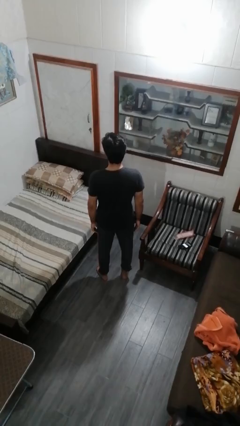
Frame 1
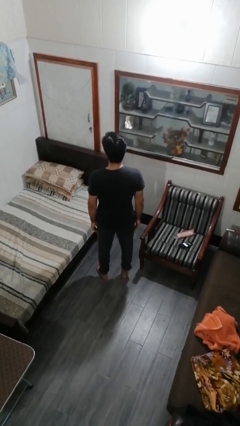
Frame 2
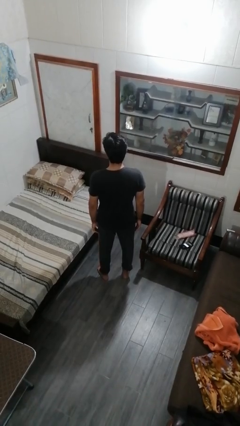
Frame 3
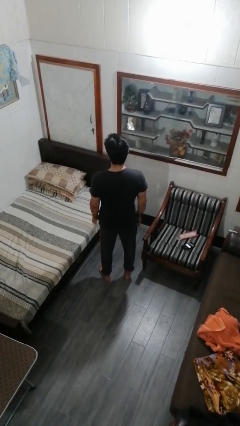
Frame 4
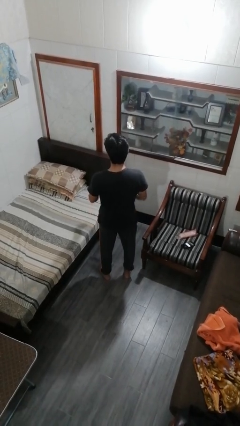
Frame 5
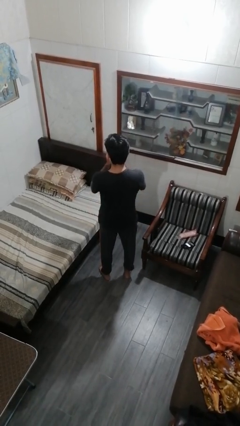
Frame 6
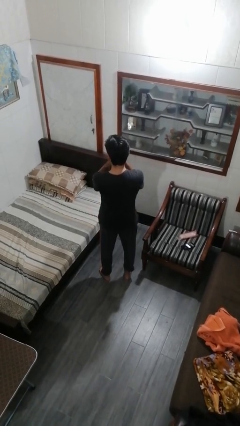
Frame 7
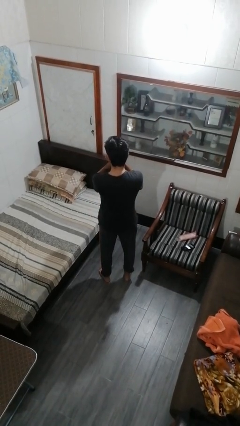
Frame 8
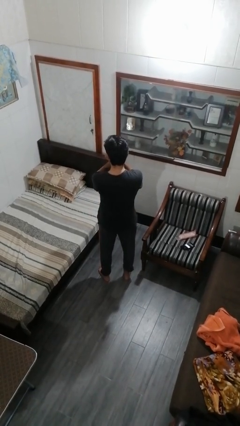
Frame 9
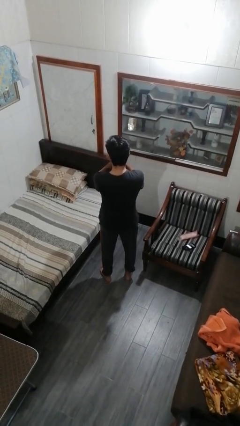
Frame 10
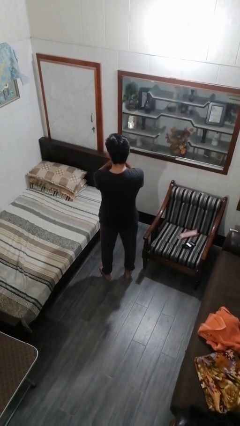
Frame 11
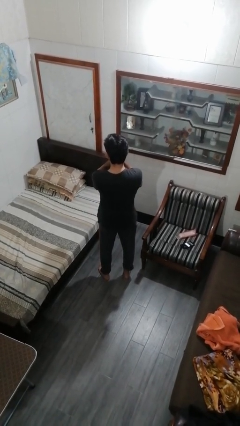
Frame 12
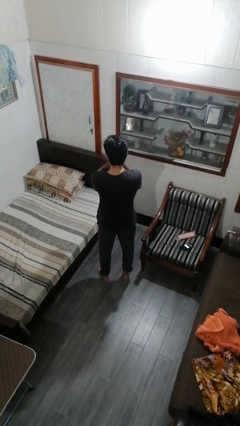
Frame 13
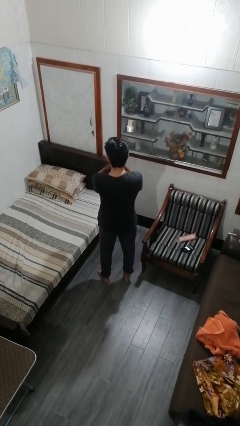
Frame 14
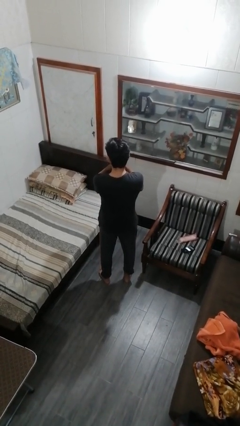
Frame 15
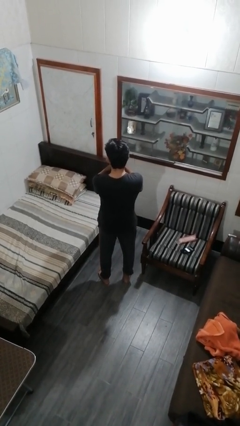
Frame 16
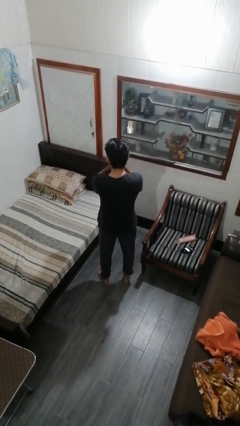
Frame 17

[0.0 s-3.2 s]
person covers face with hands

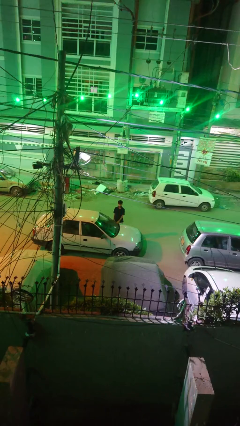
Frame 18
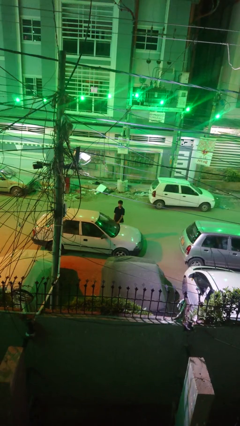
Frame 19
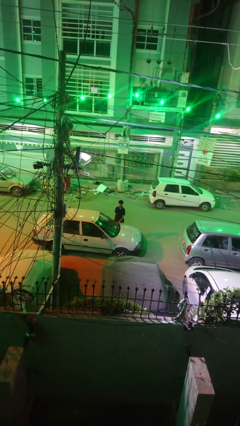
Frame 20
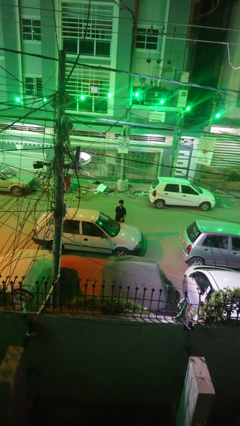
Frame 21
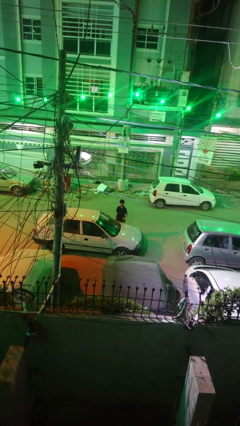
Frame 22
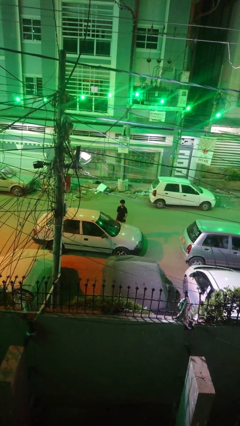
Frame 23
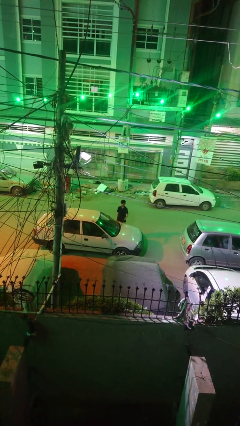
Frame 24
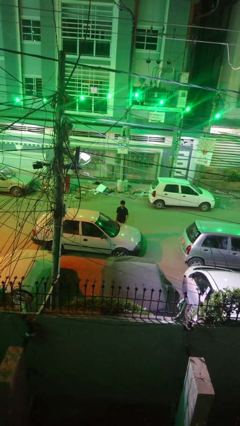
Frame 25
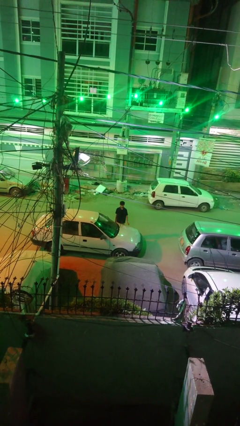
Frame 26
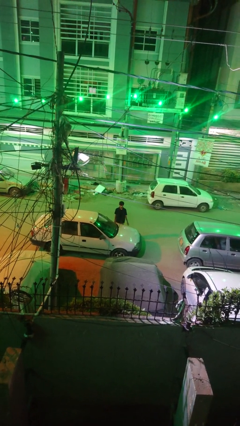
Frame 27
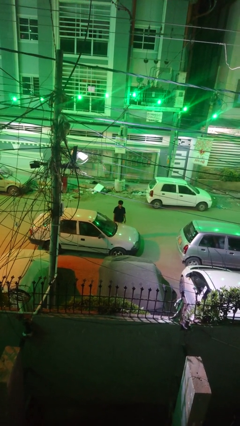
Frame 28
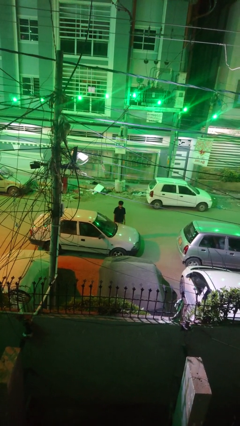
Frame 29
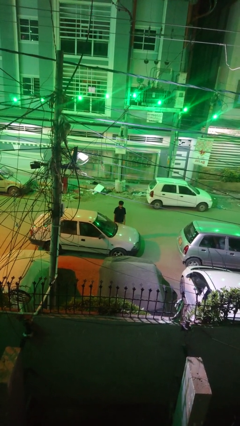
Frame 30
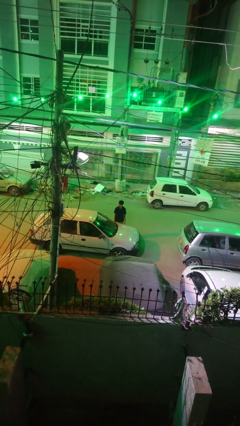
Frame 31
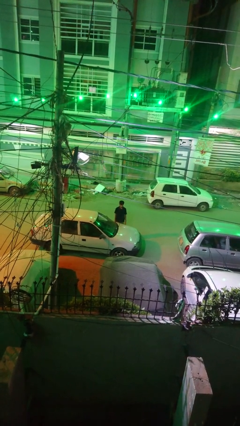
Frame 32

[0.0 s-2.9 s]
person flips up car wipers

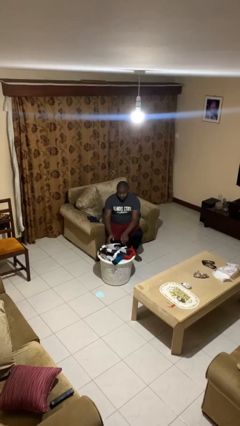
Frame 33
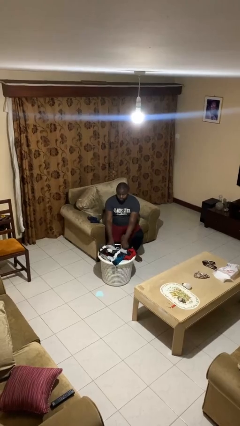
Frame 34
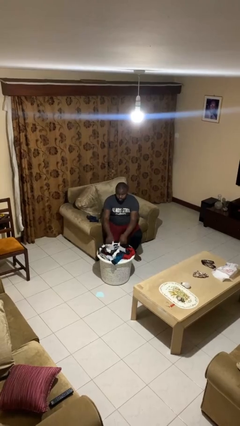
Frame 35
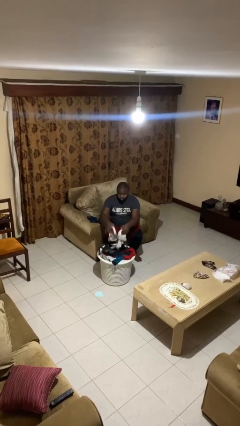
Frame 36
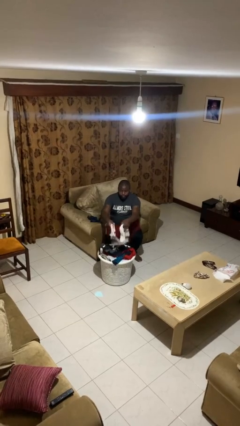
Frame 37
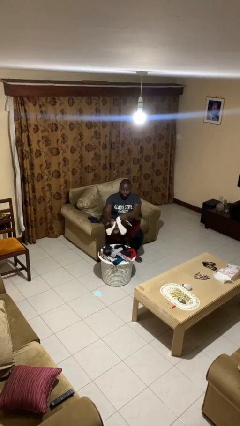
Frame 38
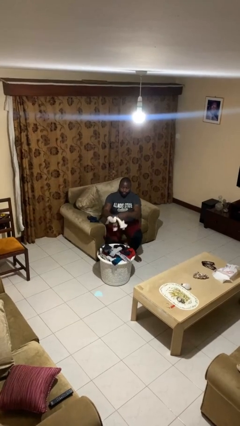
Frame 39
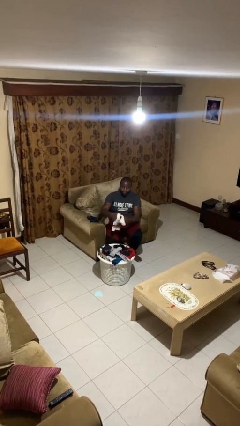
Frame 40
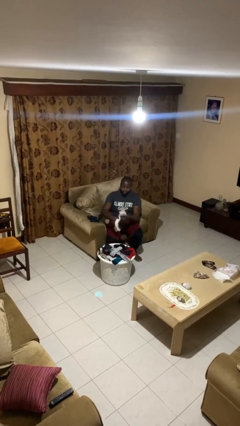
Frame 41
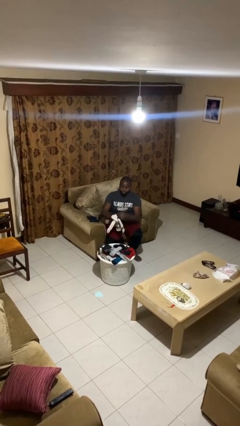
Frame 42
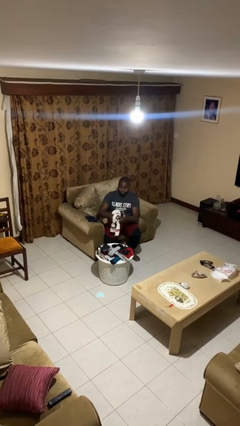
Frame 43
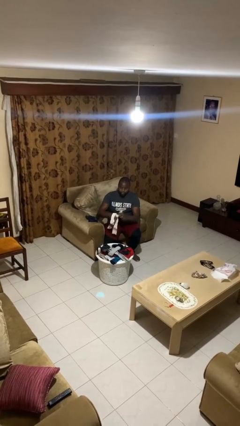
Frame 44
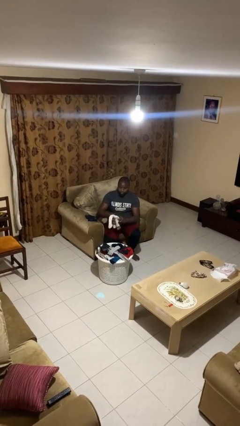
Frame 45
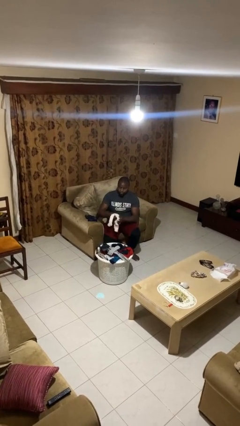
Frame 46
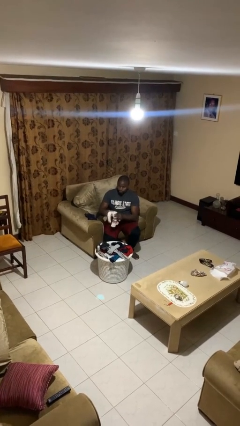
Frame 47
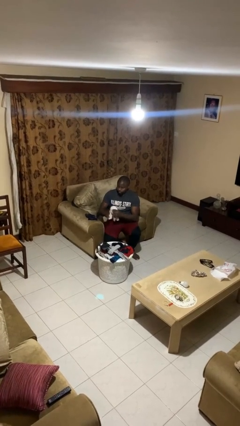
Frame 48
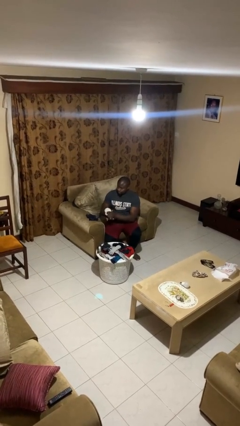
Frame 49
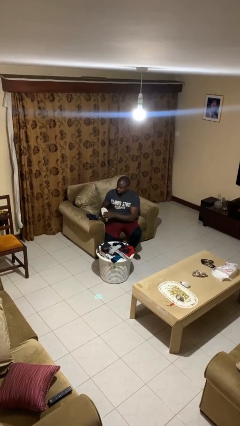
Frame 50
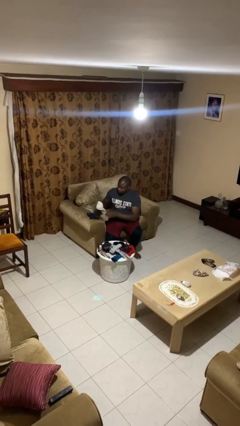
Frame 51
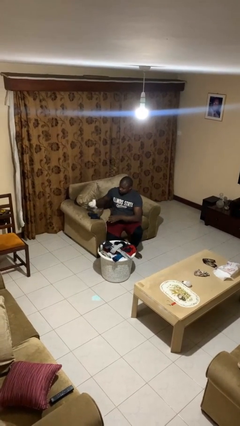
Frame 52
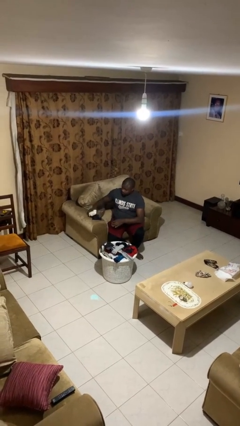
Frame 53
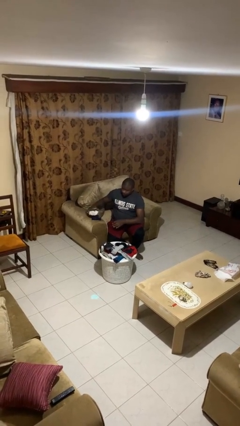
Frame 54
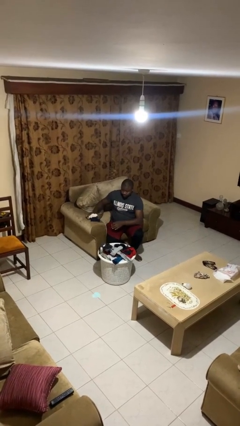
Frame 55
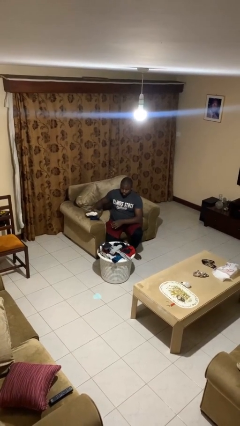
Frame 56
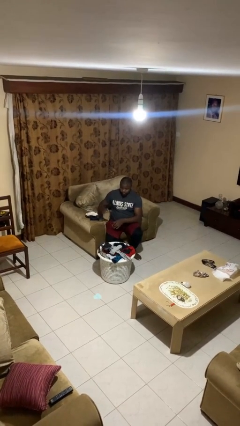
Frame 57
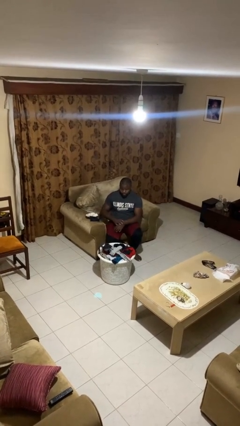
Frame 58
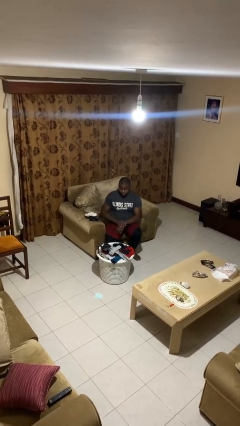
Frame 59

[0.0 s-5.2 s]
person folds socks

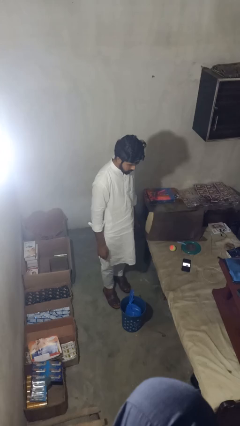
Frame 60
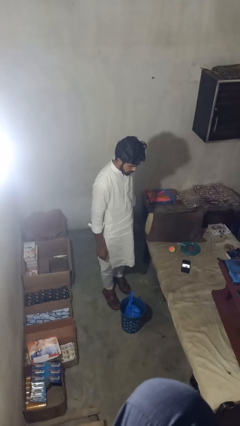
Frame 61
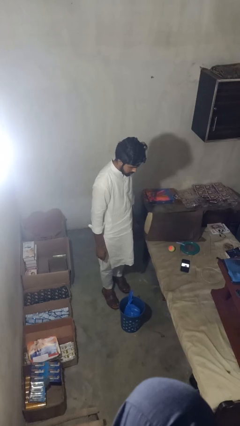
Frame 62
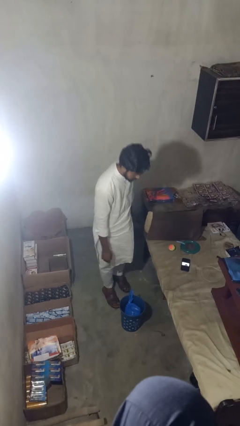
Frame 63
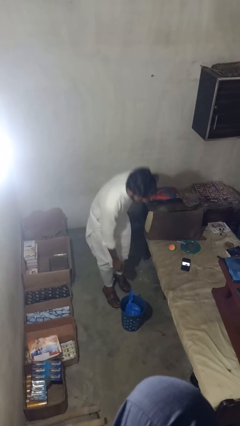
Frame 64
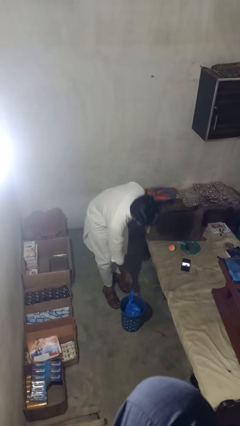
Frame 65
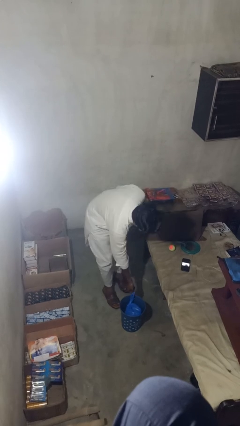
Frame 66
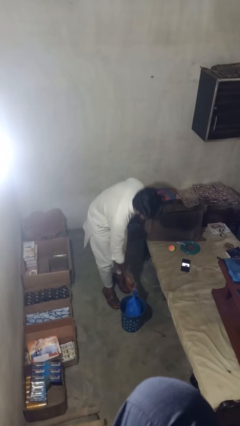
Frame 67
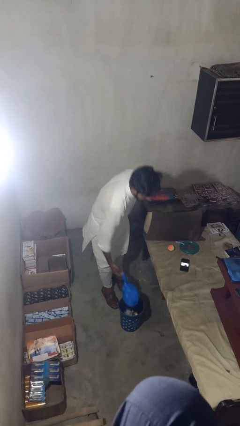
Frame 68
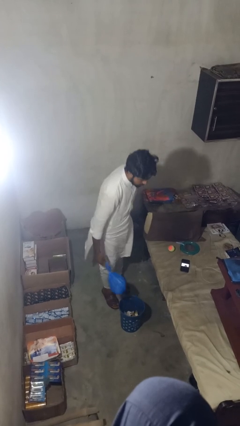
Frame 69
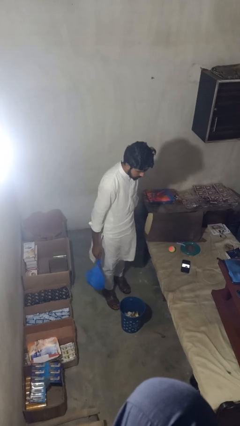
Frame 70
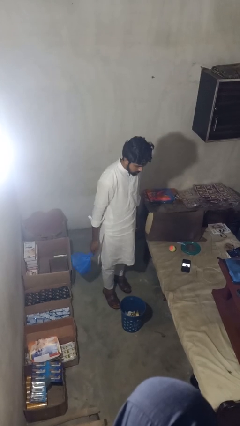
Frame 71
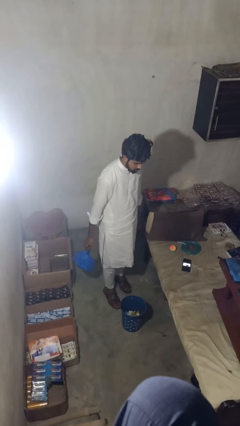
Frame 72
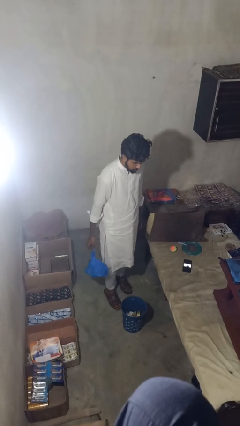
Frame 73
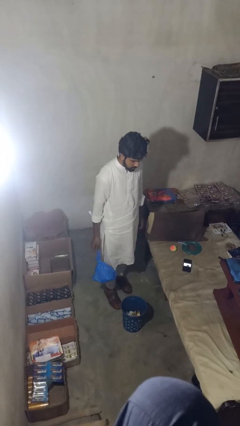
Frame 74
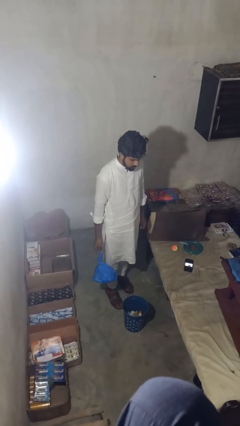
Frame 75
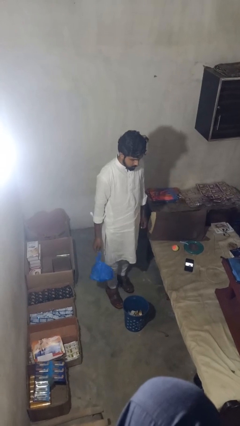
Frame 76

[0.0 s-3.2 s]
person takes object from basket

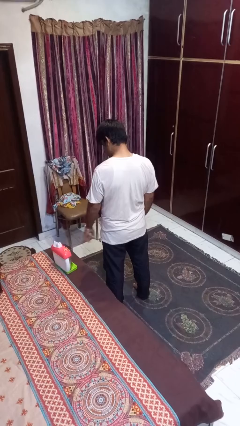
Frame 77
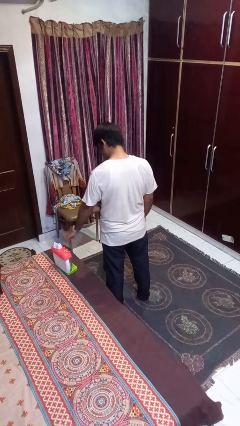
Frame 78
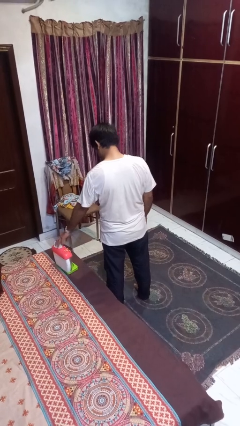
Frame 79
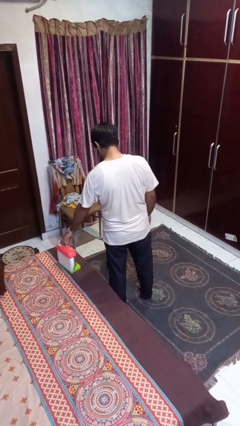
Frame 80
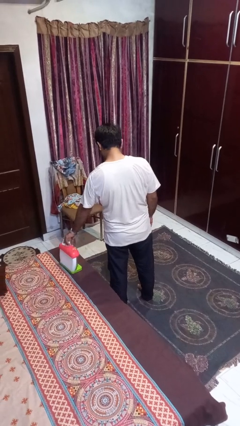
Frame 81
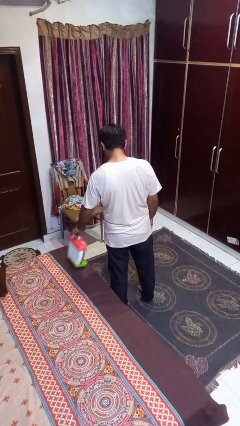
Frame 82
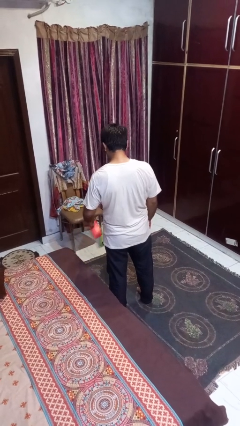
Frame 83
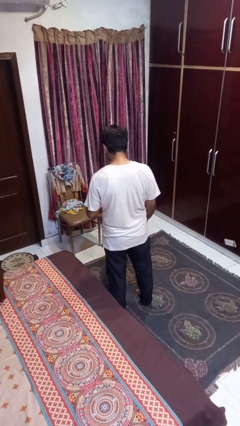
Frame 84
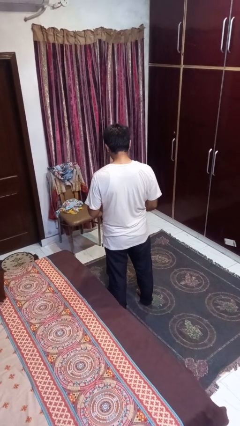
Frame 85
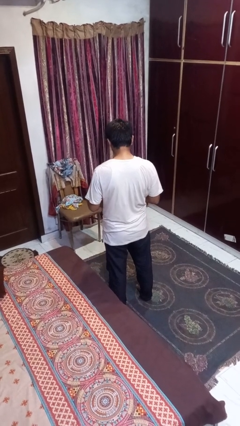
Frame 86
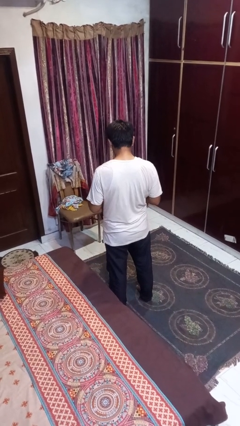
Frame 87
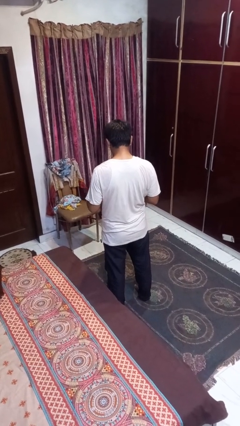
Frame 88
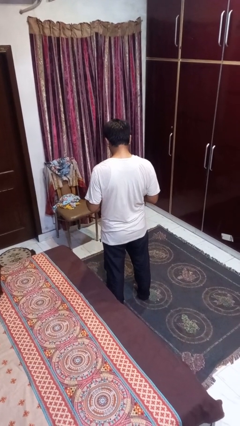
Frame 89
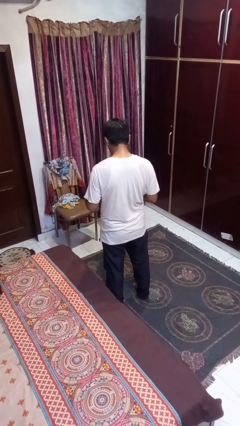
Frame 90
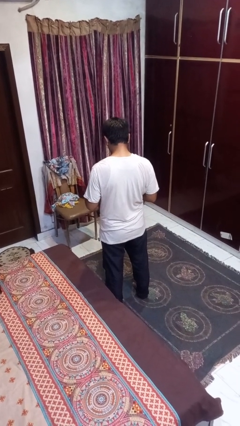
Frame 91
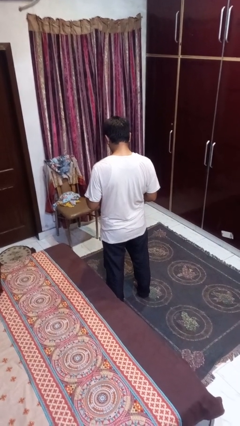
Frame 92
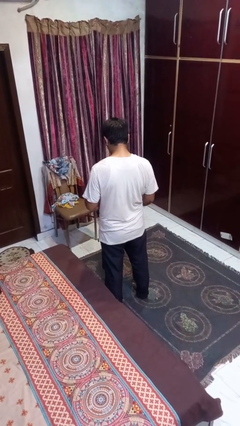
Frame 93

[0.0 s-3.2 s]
person picks up object from bed
